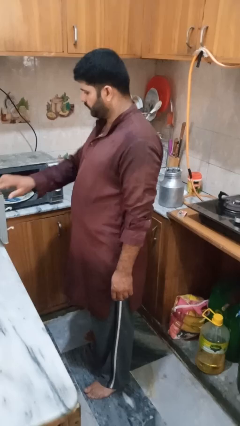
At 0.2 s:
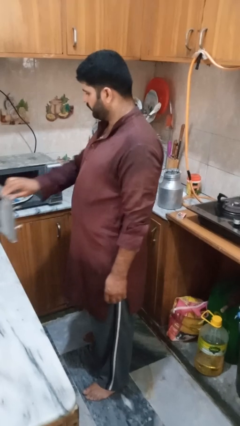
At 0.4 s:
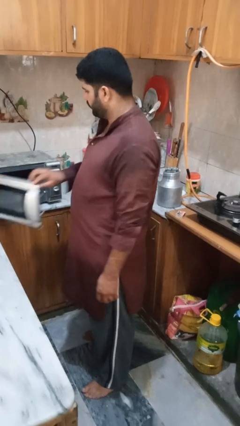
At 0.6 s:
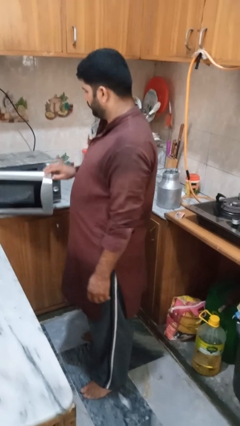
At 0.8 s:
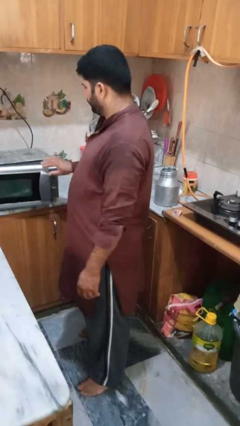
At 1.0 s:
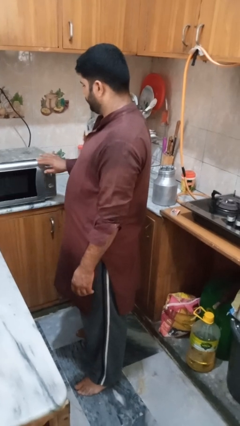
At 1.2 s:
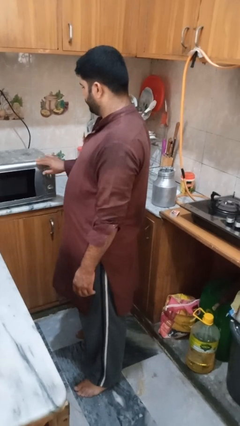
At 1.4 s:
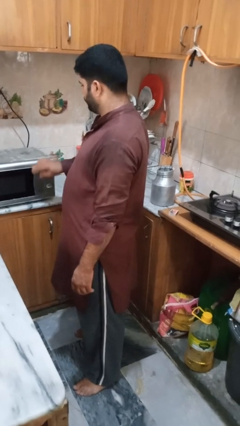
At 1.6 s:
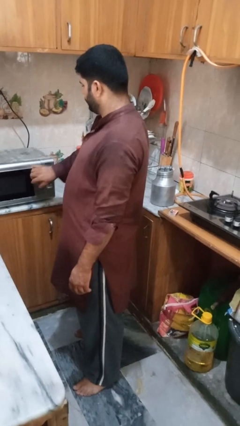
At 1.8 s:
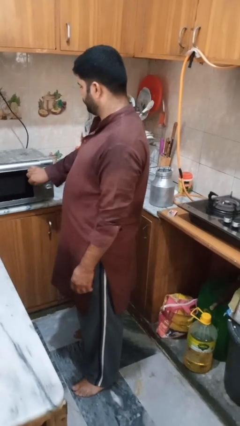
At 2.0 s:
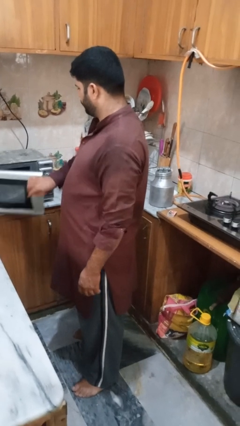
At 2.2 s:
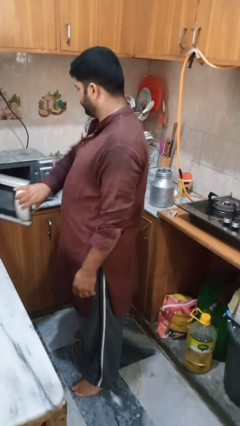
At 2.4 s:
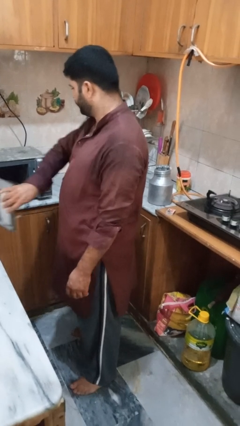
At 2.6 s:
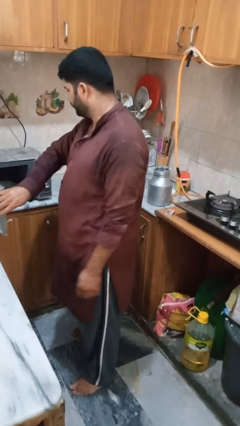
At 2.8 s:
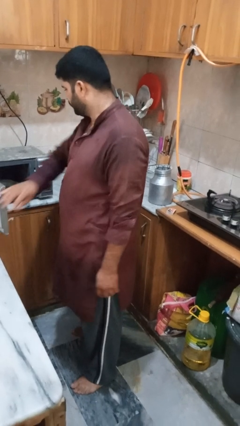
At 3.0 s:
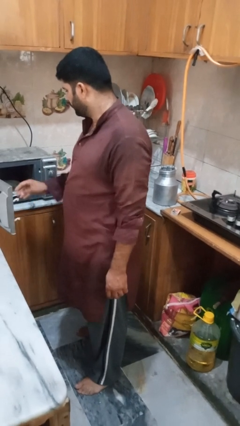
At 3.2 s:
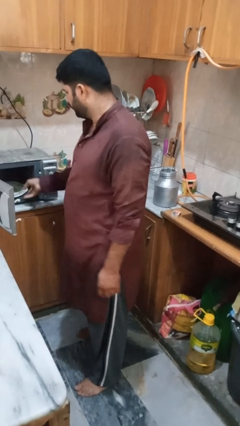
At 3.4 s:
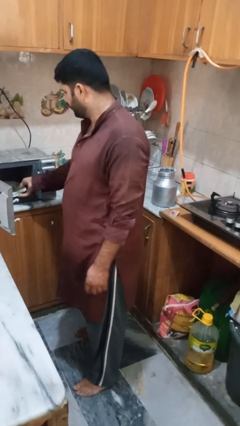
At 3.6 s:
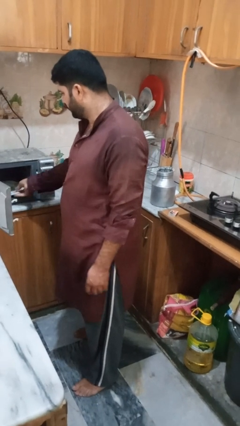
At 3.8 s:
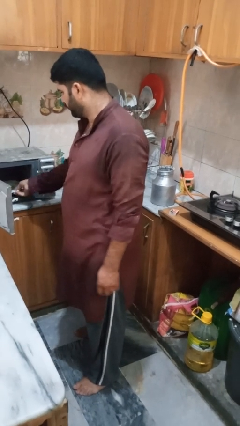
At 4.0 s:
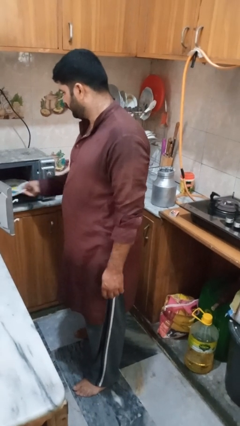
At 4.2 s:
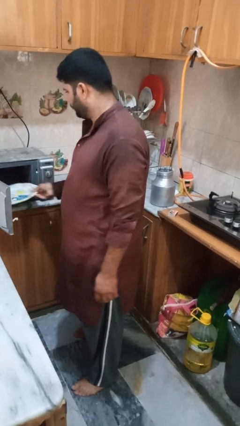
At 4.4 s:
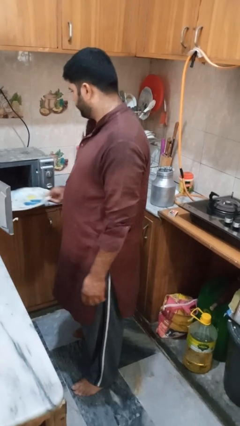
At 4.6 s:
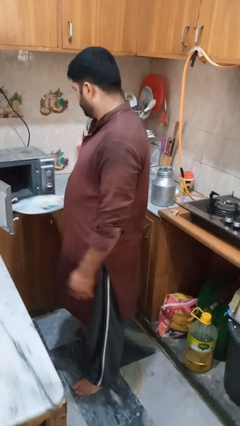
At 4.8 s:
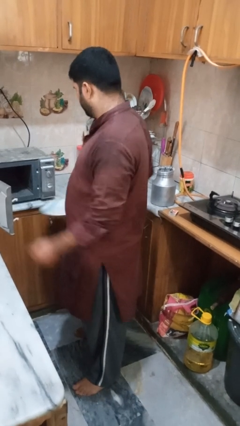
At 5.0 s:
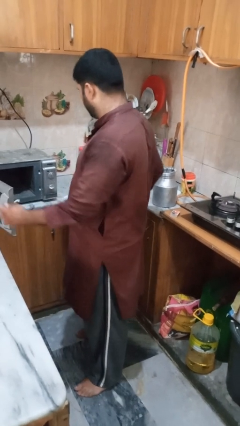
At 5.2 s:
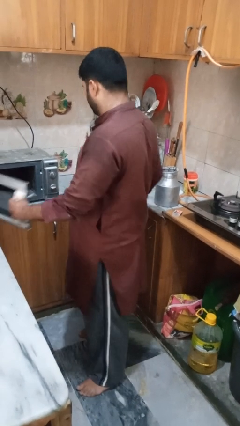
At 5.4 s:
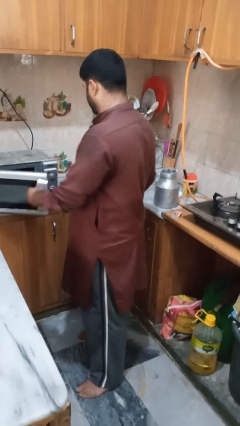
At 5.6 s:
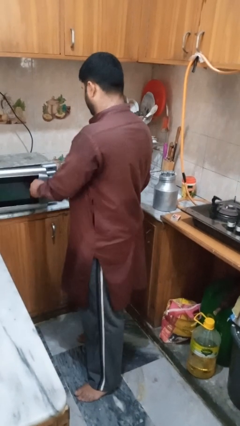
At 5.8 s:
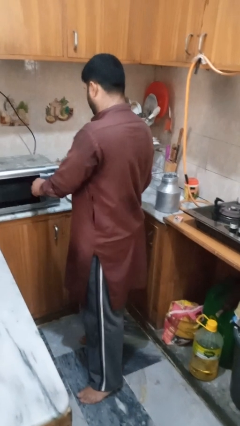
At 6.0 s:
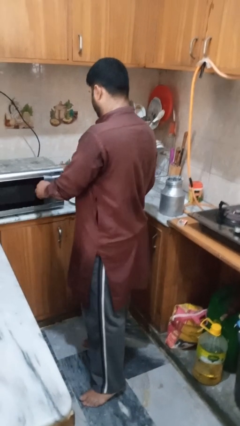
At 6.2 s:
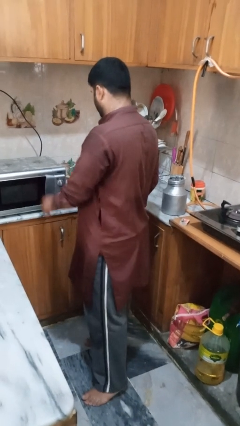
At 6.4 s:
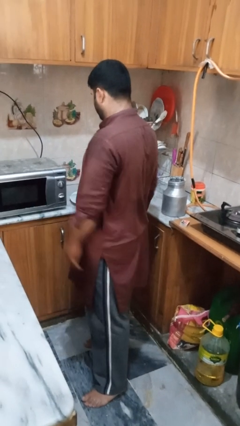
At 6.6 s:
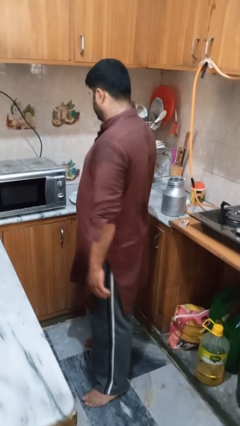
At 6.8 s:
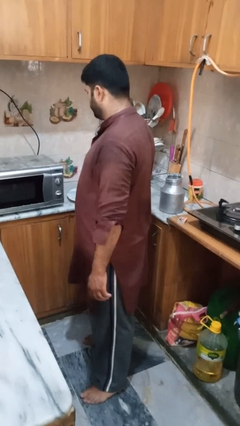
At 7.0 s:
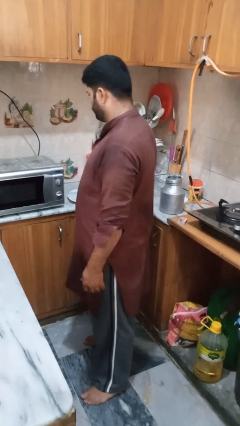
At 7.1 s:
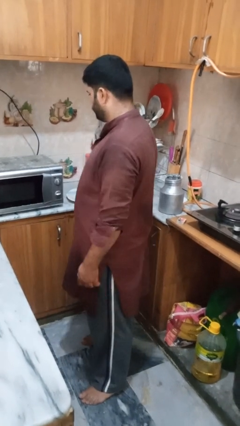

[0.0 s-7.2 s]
person takes object from oven

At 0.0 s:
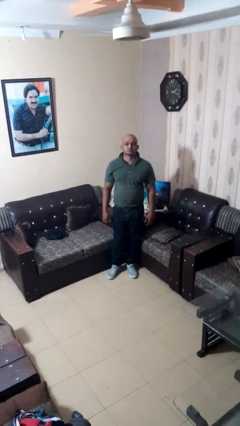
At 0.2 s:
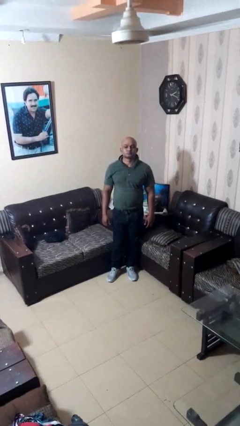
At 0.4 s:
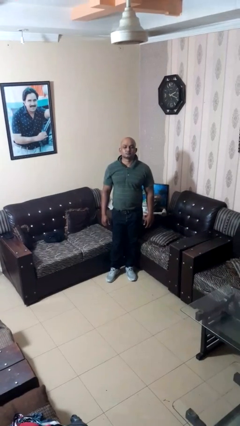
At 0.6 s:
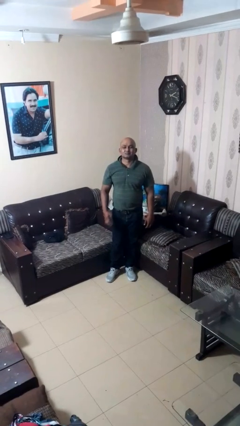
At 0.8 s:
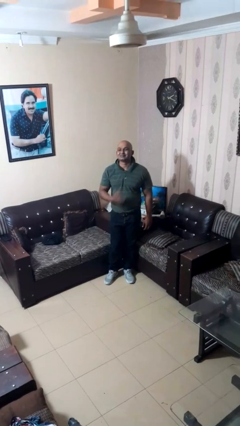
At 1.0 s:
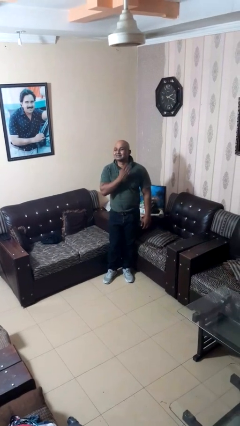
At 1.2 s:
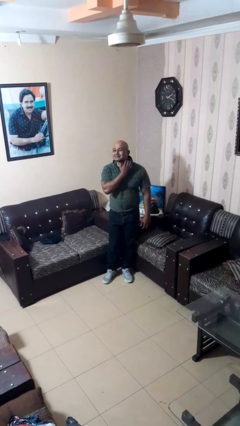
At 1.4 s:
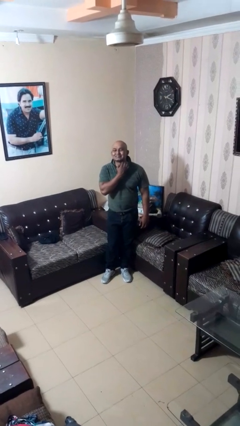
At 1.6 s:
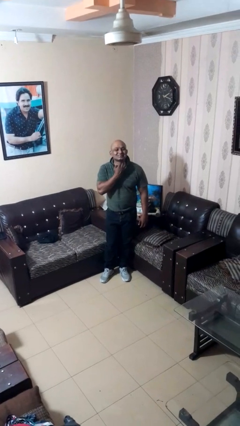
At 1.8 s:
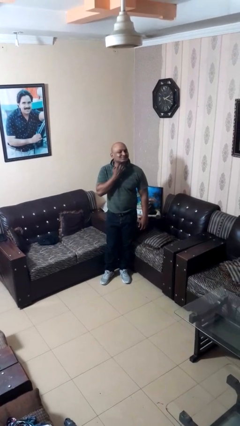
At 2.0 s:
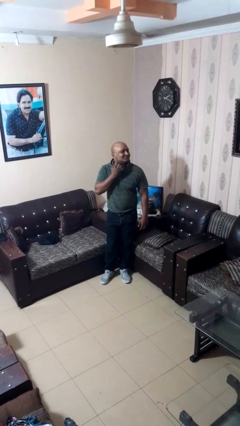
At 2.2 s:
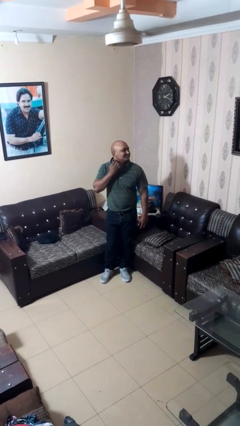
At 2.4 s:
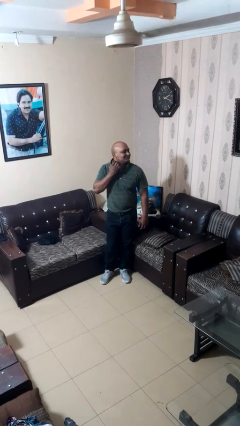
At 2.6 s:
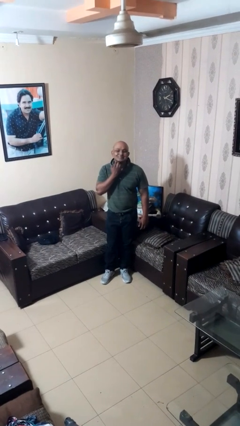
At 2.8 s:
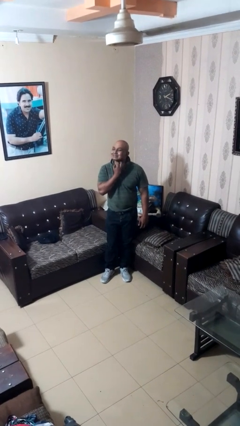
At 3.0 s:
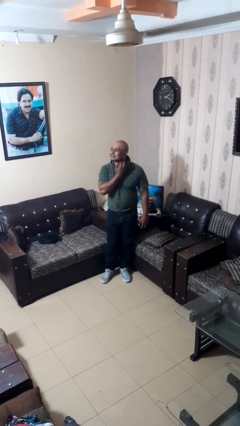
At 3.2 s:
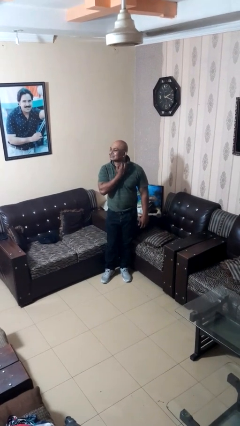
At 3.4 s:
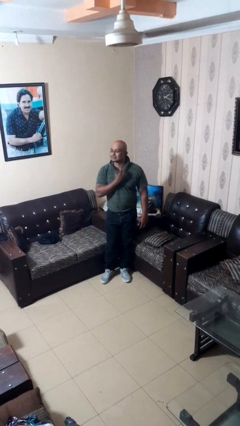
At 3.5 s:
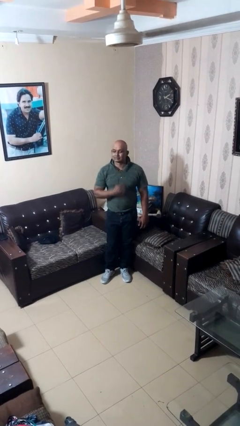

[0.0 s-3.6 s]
person gestures cut

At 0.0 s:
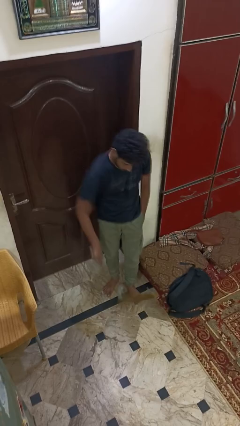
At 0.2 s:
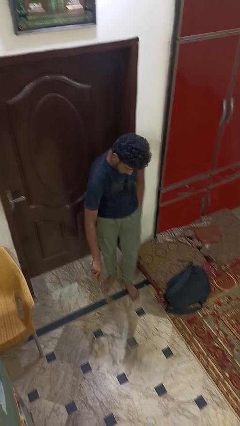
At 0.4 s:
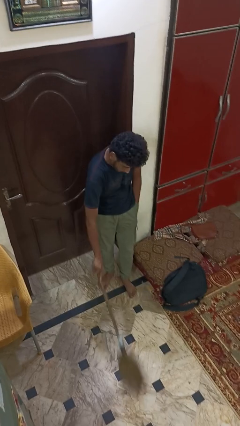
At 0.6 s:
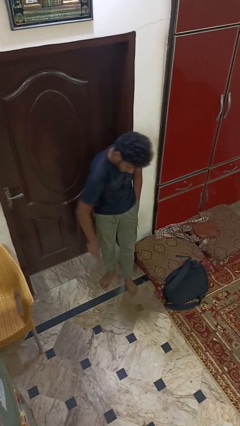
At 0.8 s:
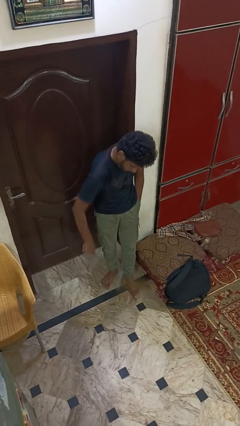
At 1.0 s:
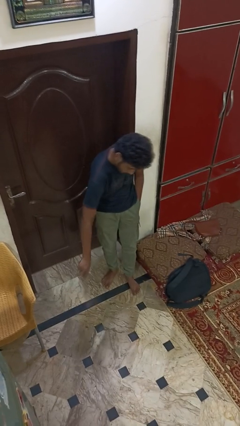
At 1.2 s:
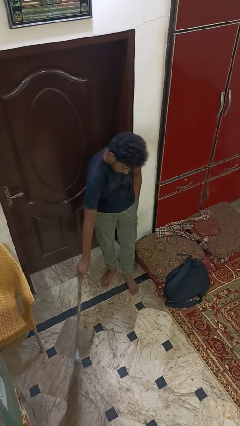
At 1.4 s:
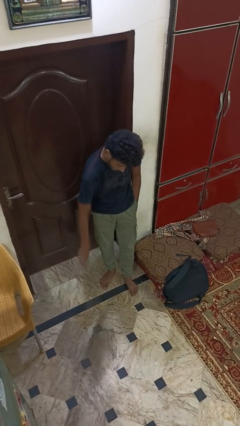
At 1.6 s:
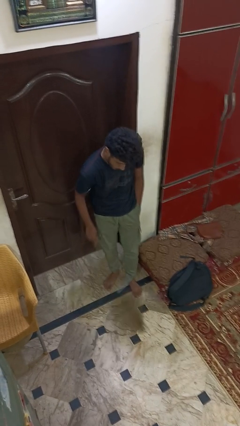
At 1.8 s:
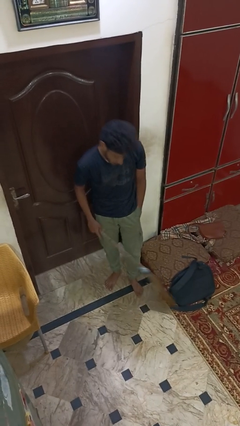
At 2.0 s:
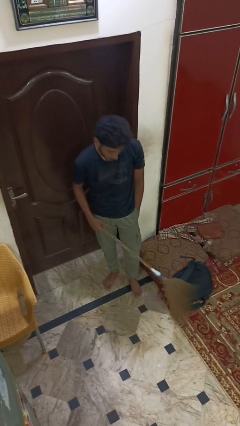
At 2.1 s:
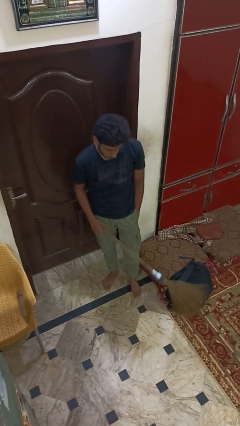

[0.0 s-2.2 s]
person sweeps floor

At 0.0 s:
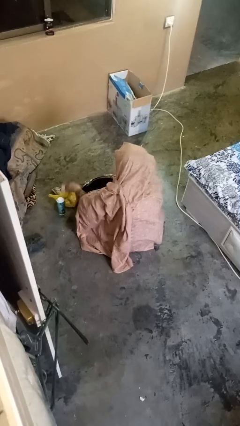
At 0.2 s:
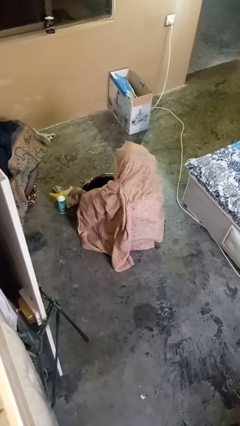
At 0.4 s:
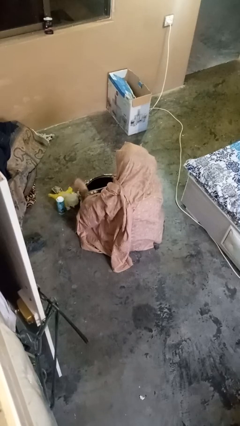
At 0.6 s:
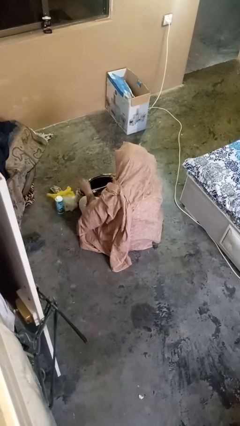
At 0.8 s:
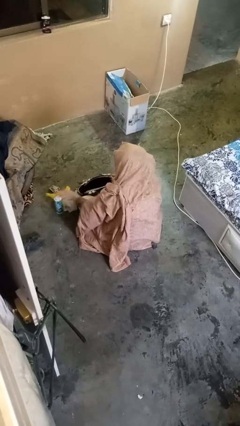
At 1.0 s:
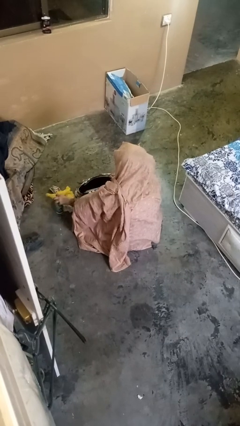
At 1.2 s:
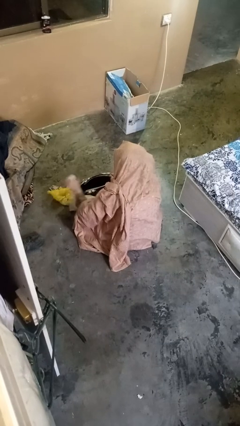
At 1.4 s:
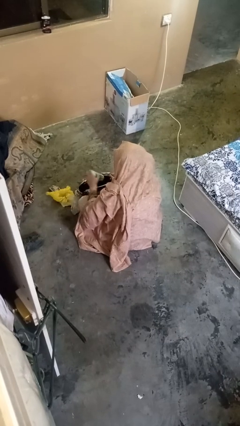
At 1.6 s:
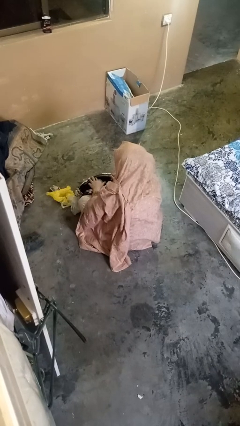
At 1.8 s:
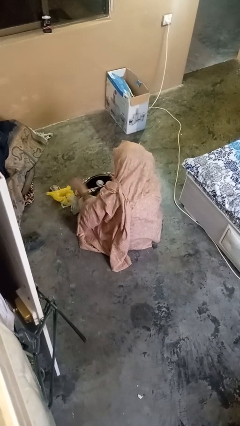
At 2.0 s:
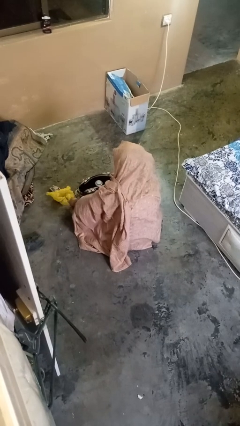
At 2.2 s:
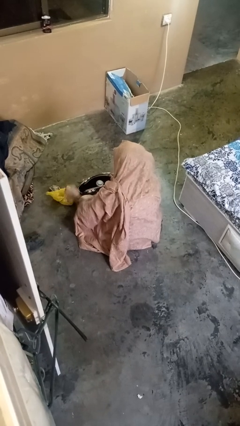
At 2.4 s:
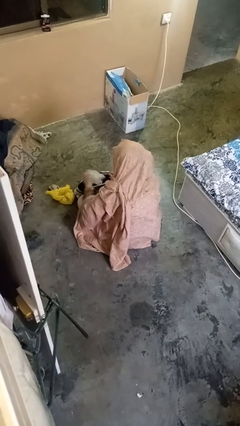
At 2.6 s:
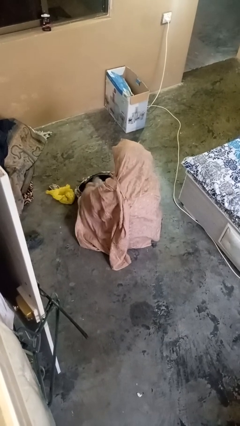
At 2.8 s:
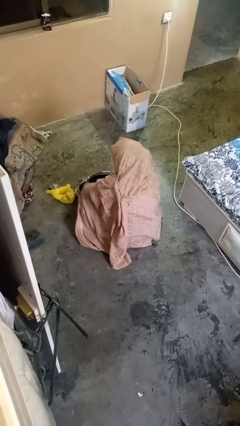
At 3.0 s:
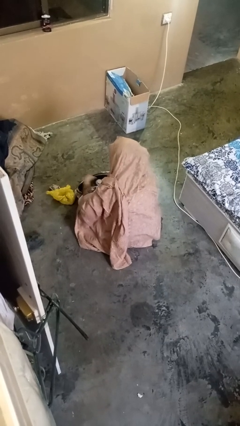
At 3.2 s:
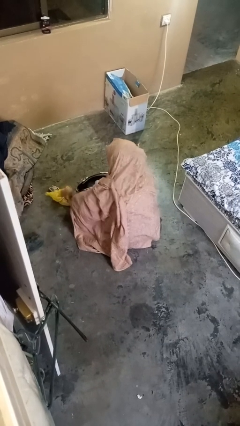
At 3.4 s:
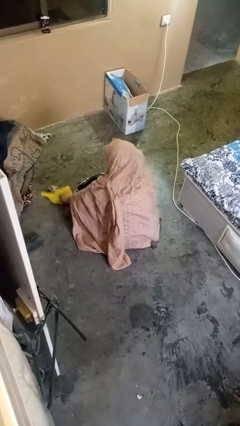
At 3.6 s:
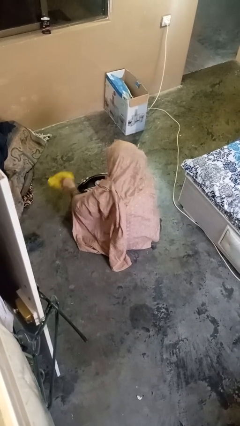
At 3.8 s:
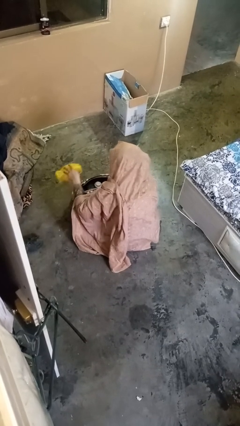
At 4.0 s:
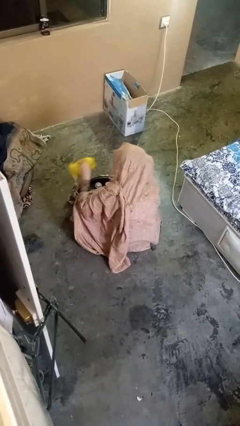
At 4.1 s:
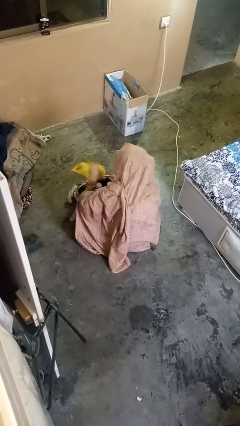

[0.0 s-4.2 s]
person puts object into purse

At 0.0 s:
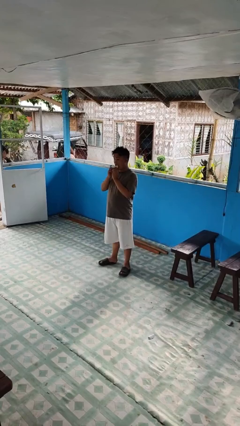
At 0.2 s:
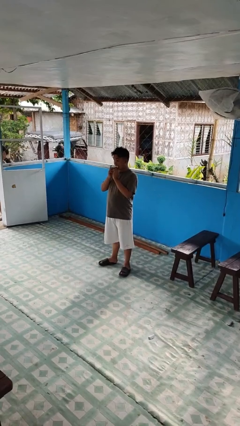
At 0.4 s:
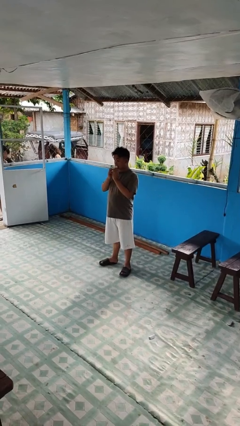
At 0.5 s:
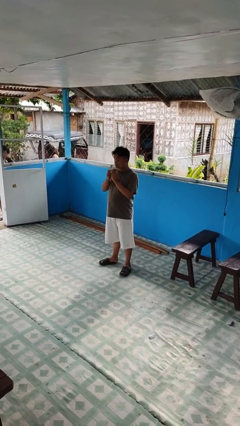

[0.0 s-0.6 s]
person eats banana
